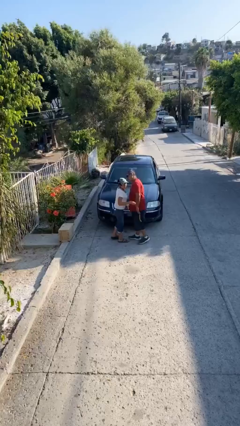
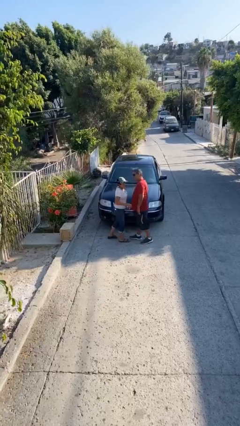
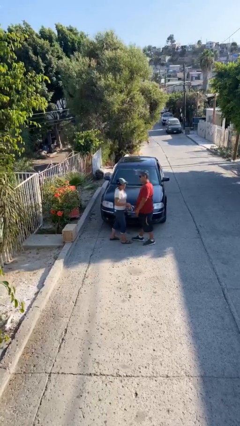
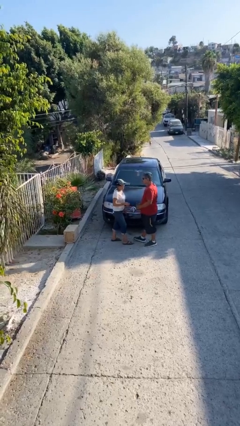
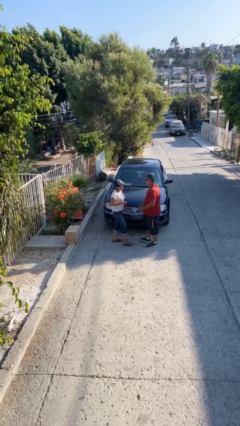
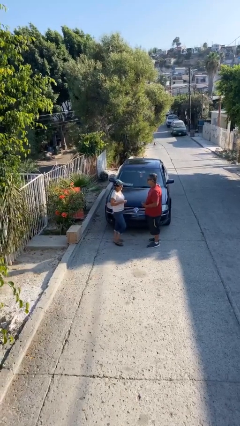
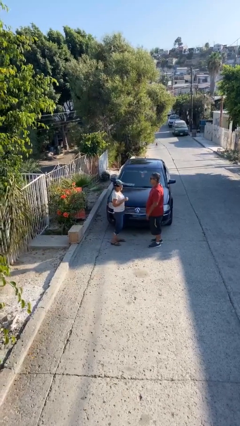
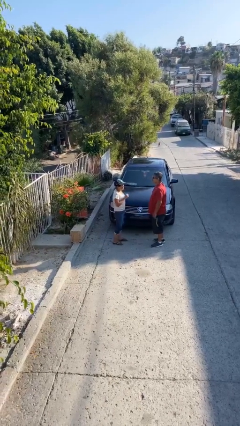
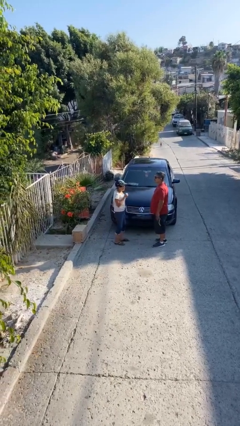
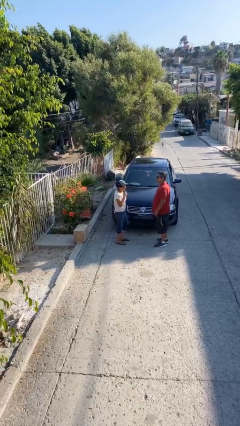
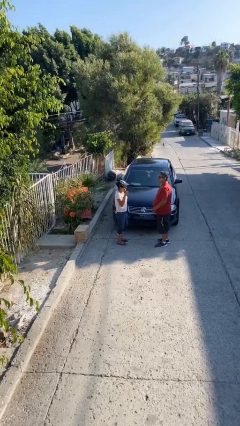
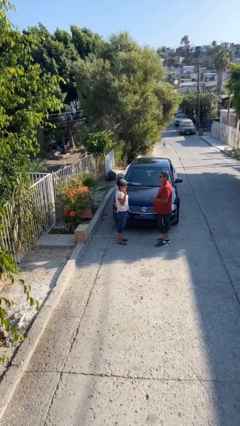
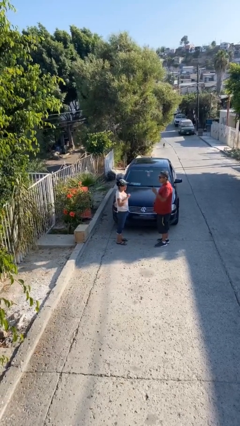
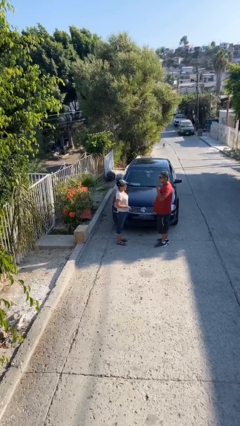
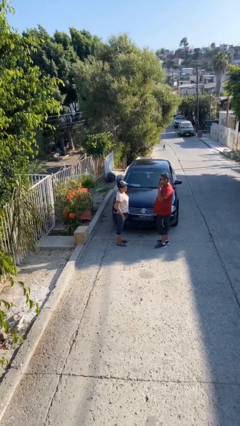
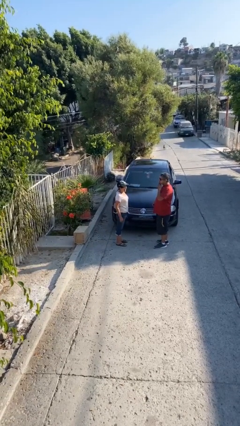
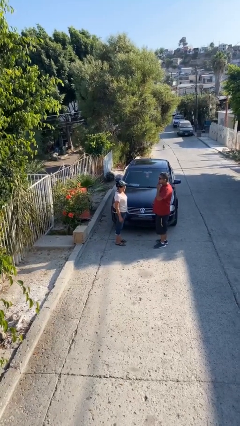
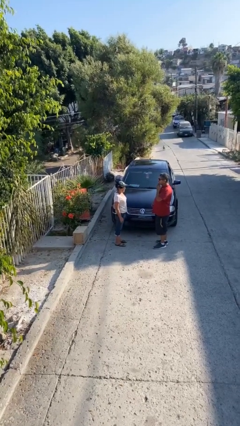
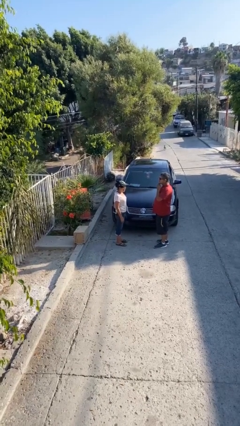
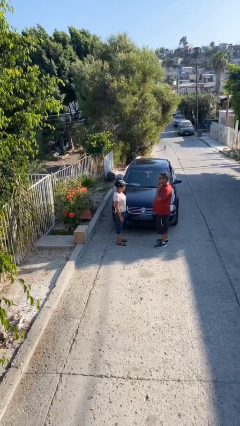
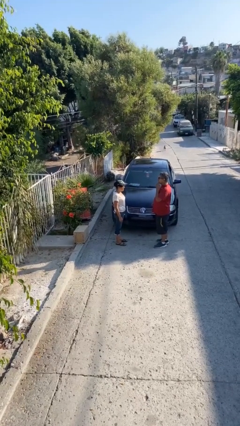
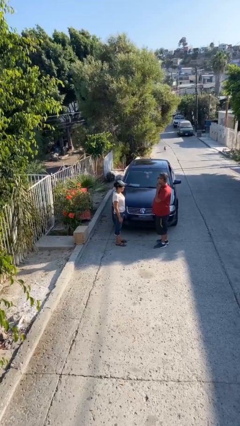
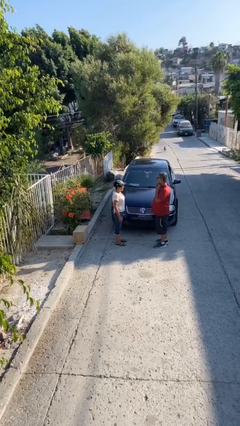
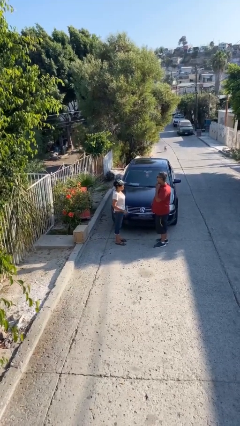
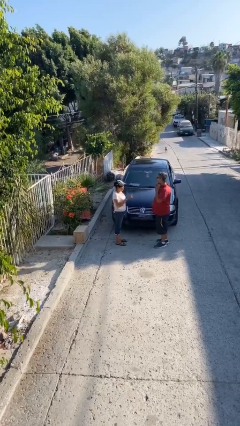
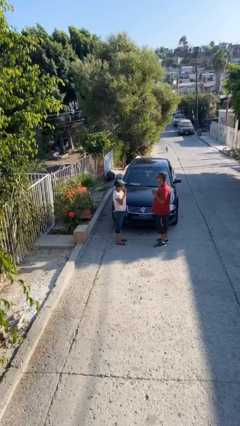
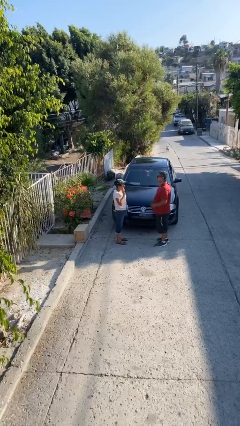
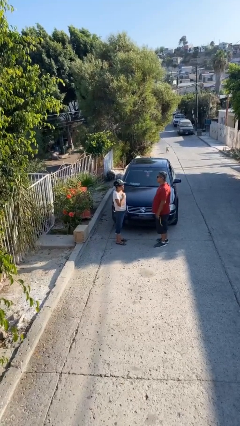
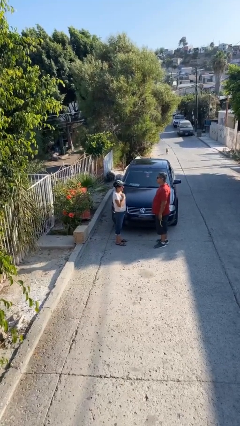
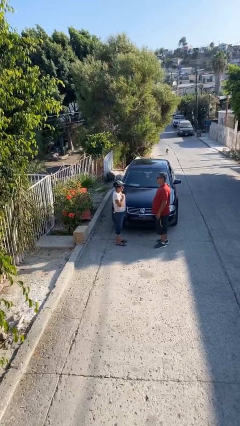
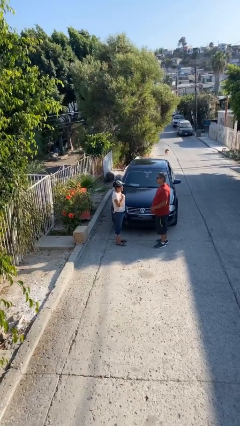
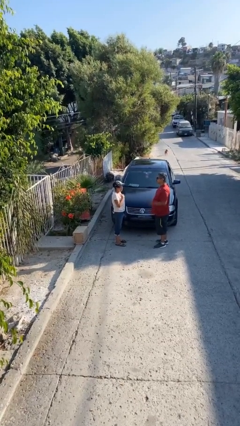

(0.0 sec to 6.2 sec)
person talks to person

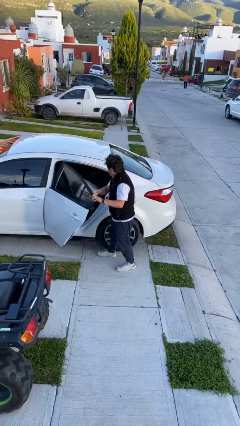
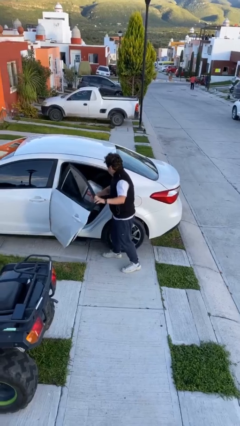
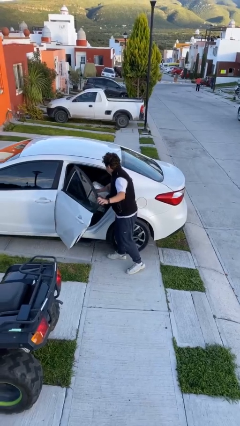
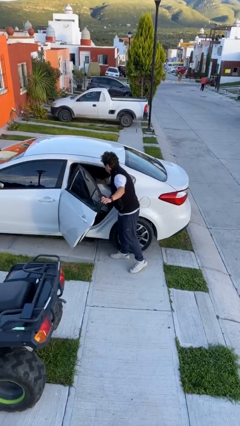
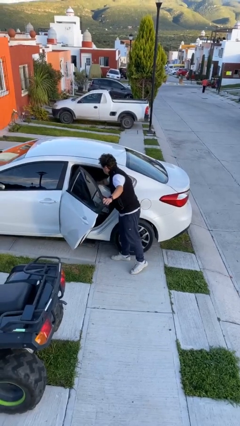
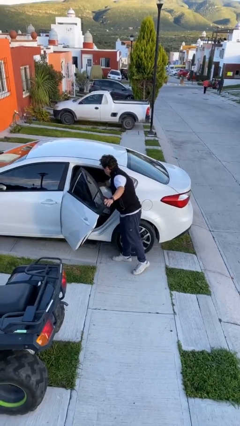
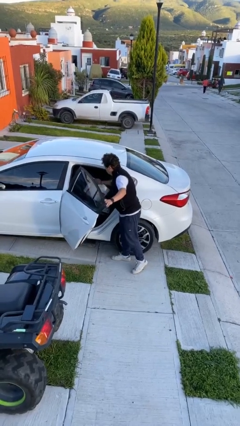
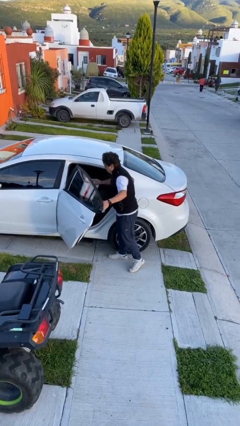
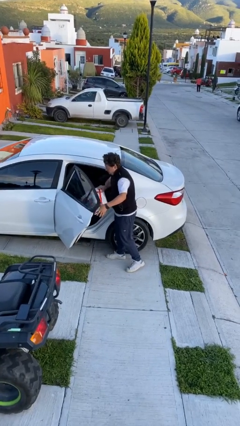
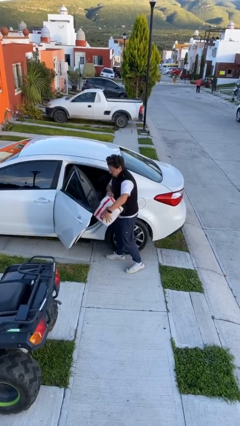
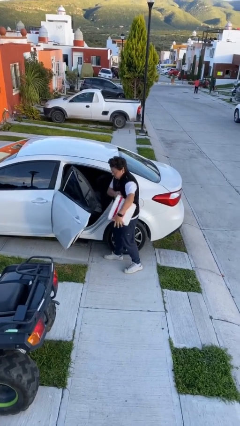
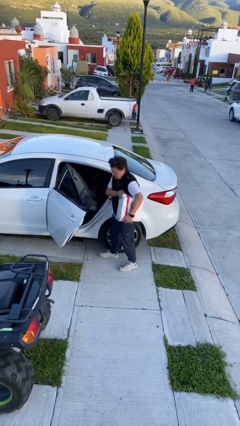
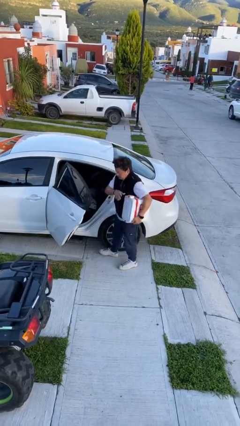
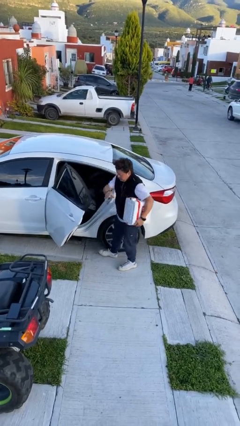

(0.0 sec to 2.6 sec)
person unloads car

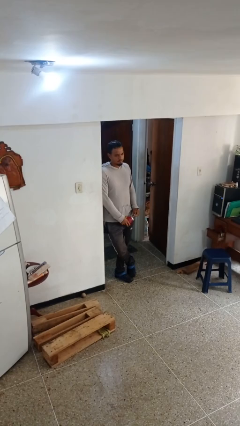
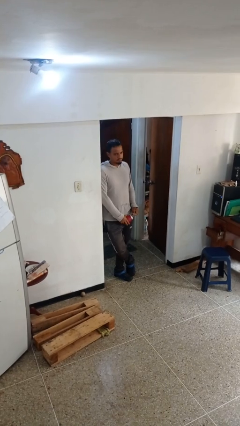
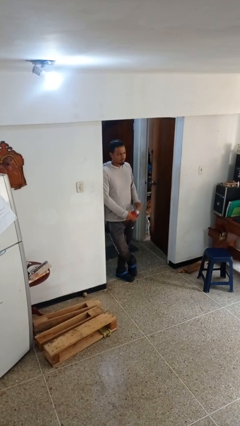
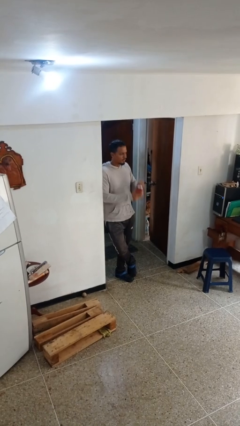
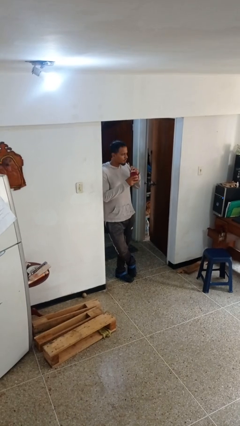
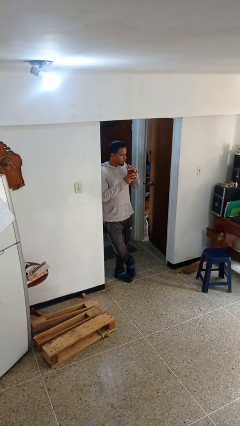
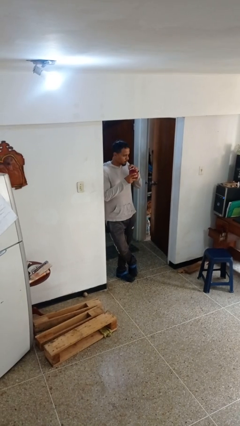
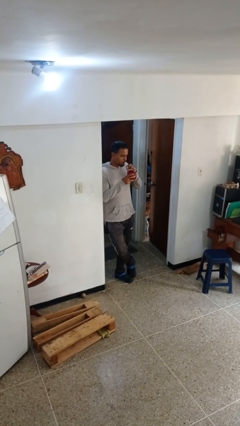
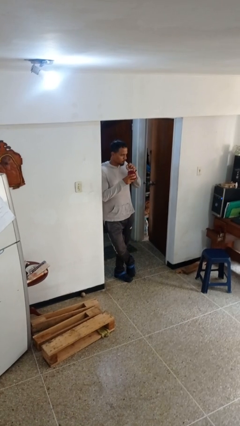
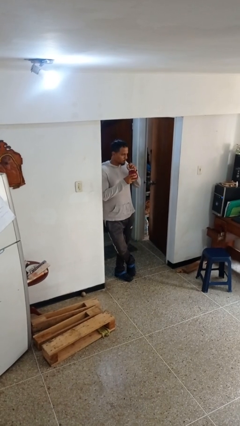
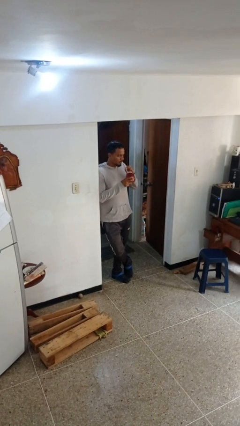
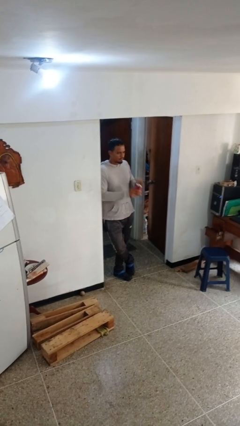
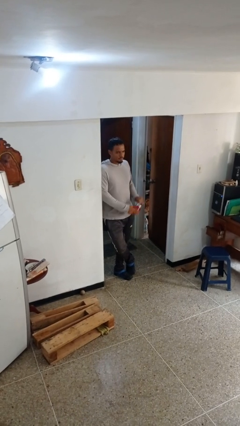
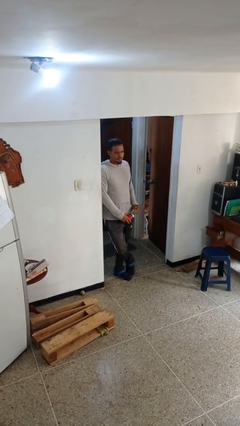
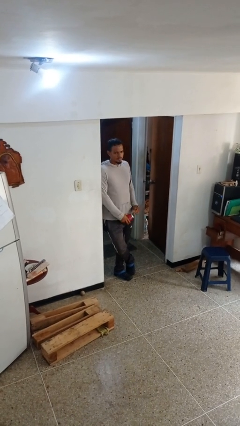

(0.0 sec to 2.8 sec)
person drinks from straw

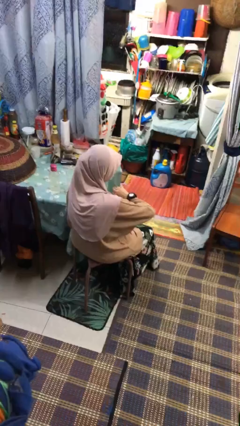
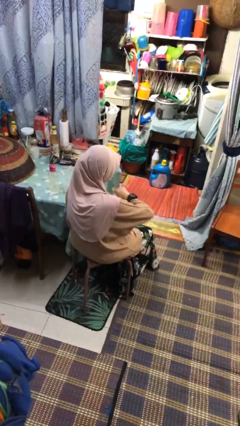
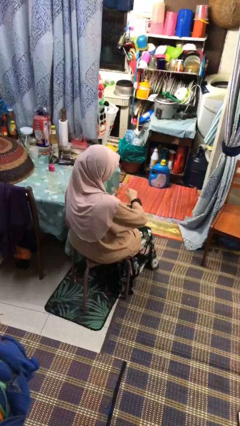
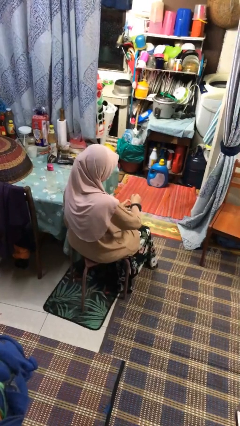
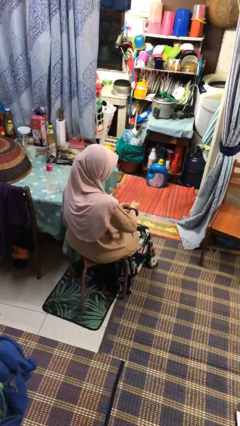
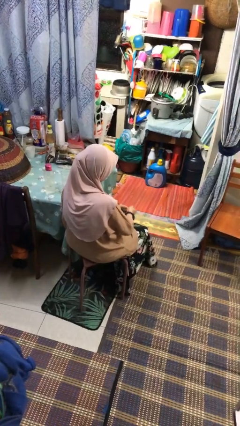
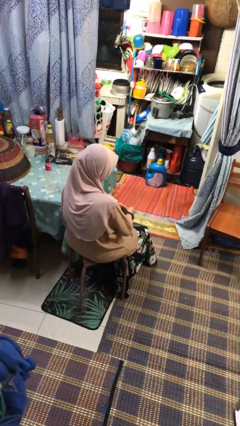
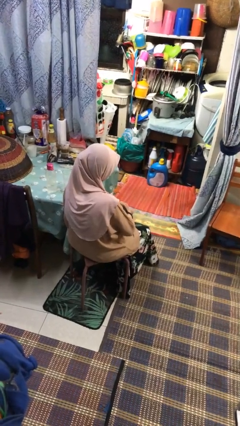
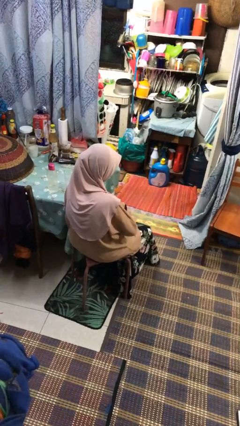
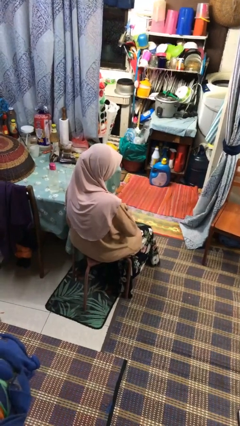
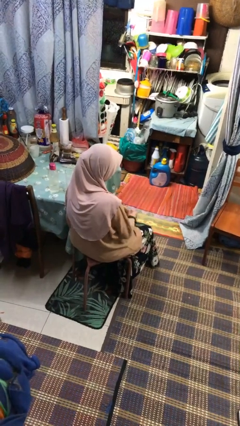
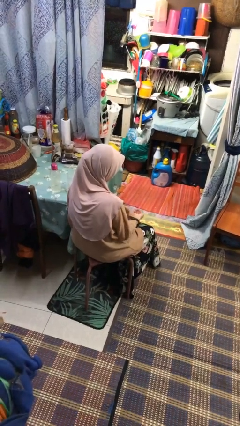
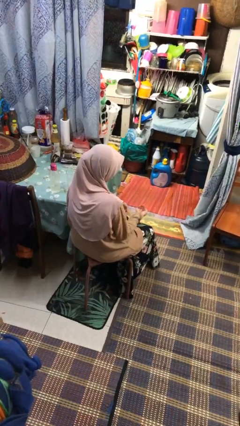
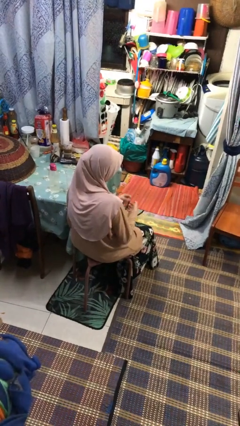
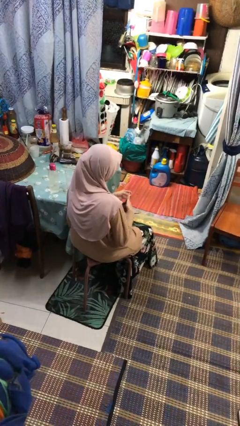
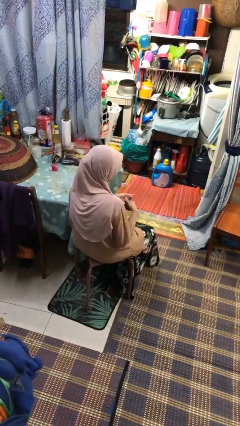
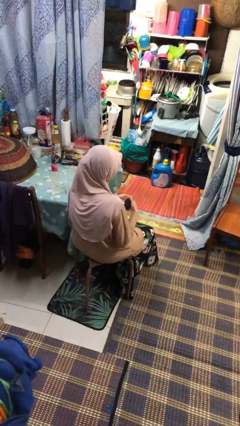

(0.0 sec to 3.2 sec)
person takes off wristwatch

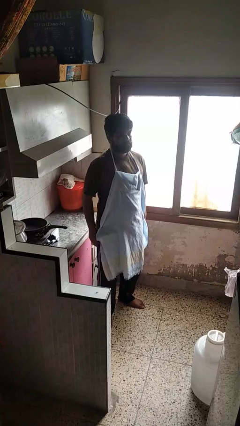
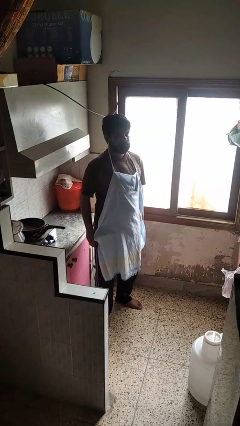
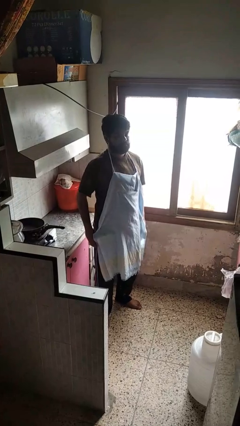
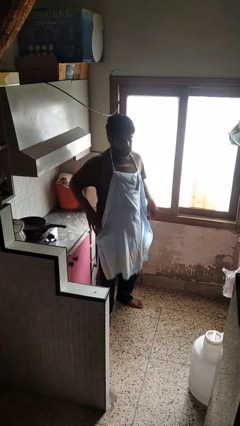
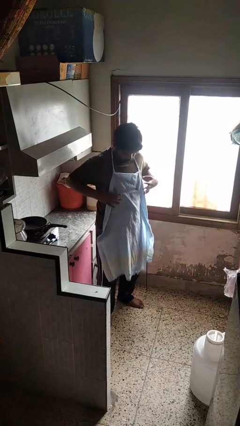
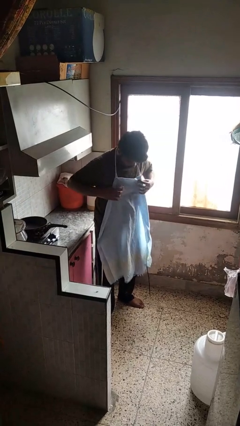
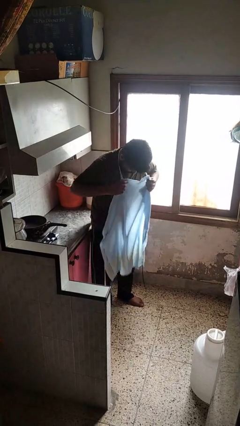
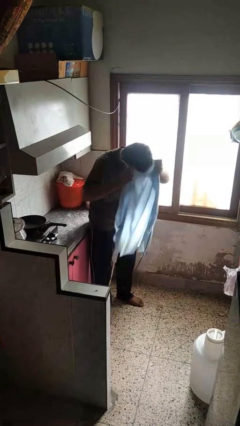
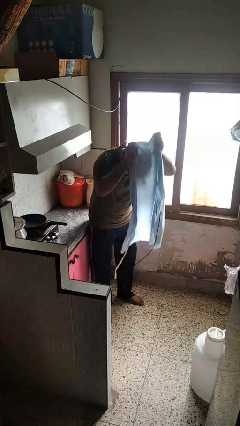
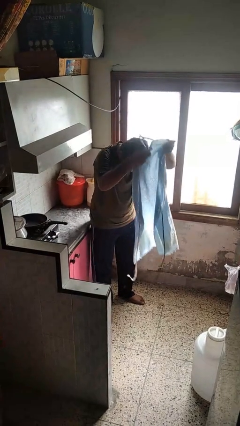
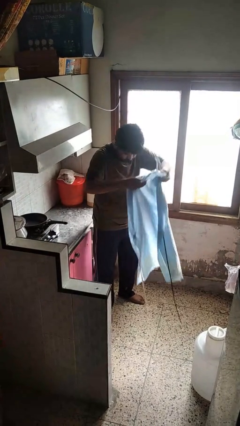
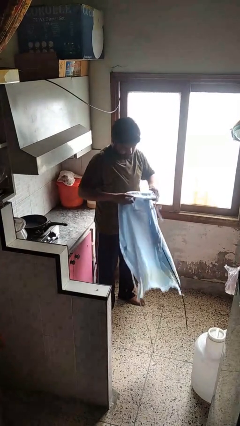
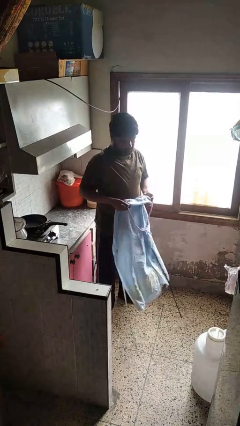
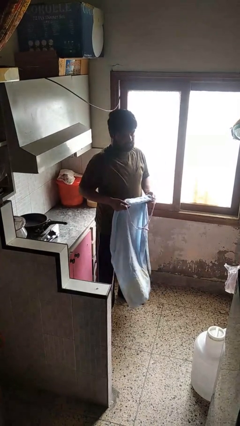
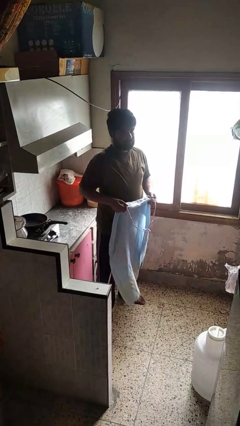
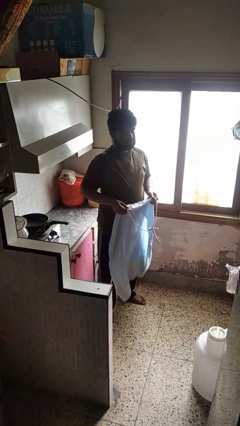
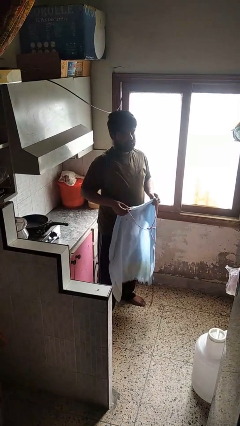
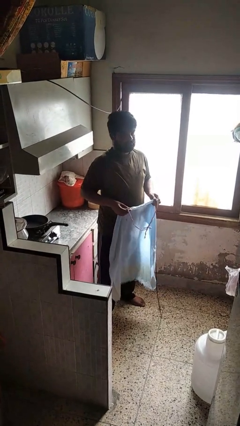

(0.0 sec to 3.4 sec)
person takes off apron
